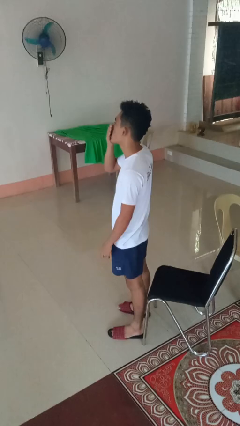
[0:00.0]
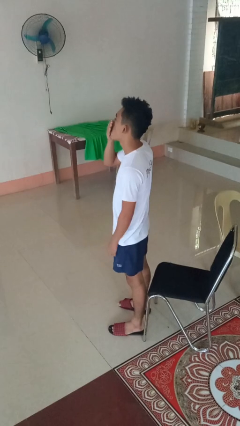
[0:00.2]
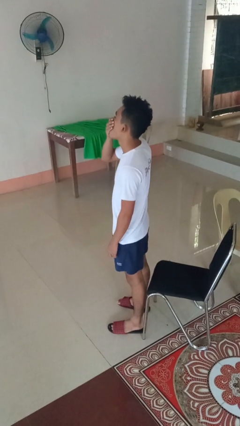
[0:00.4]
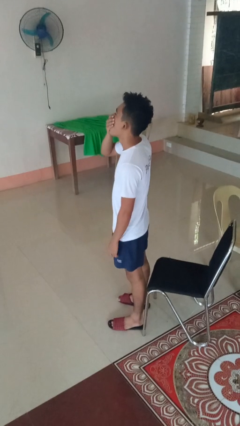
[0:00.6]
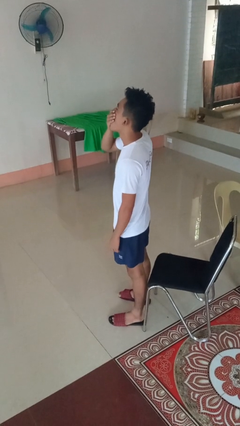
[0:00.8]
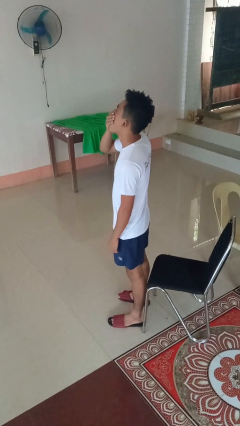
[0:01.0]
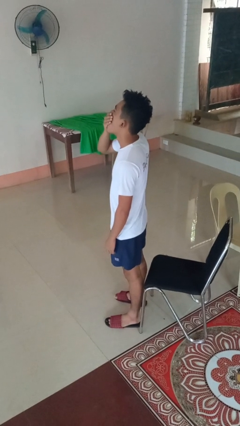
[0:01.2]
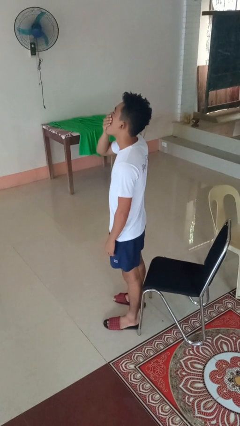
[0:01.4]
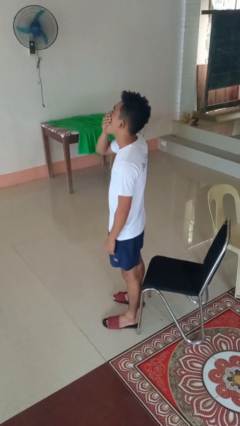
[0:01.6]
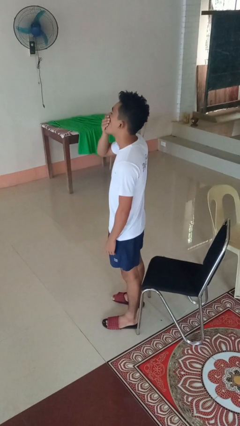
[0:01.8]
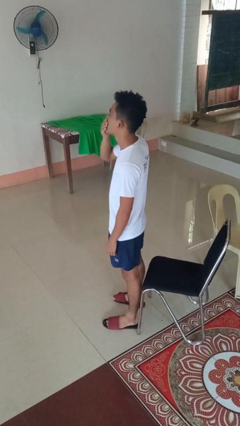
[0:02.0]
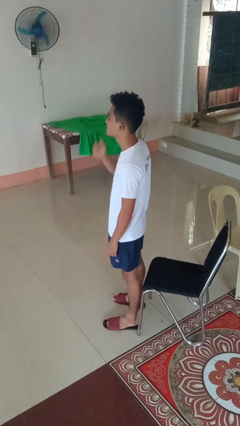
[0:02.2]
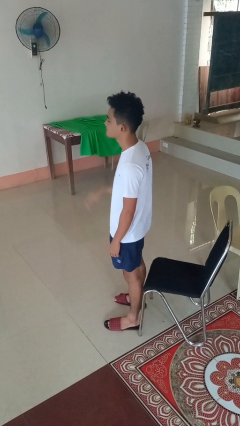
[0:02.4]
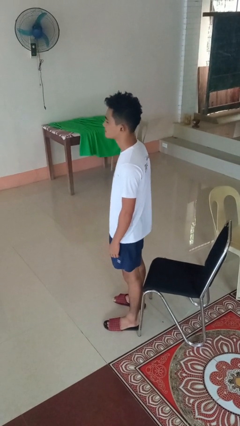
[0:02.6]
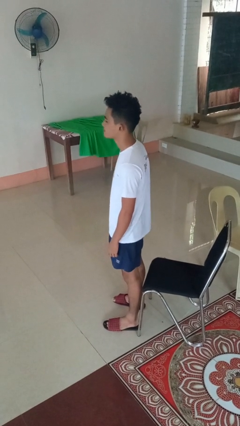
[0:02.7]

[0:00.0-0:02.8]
person yawns

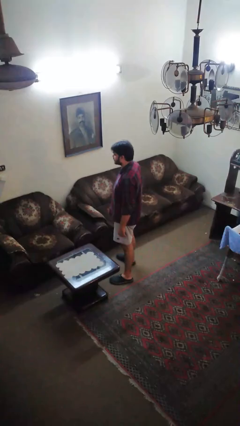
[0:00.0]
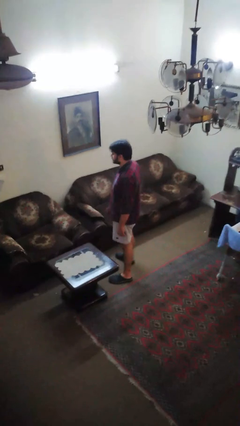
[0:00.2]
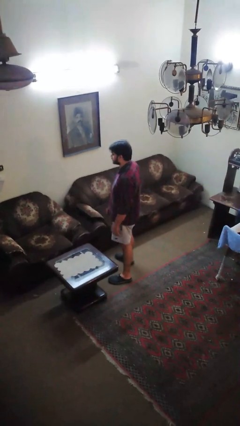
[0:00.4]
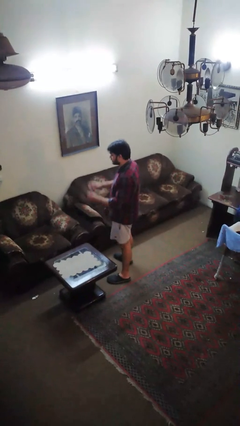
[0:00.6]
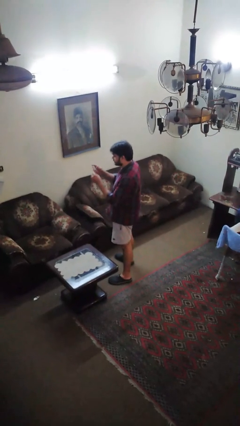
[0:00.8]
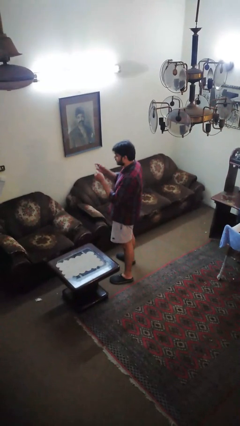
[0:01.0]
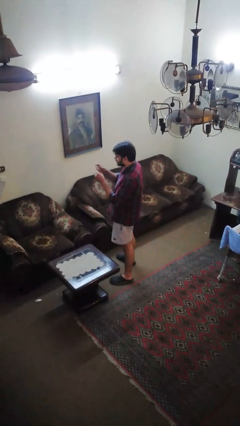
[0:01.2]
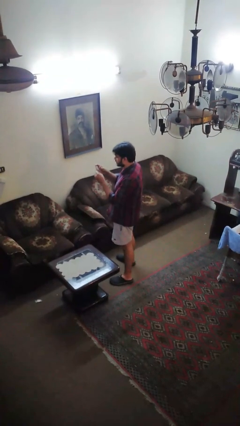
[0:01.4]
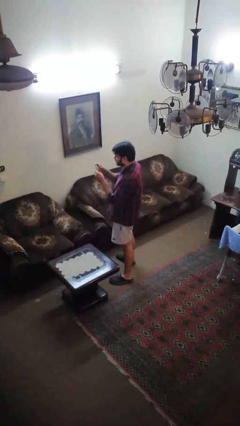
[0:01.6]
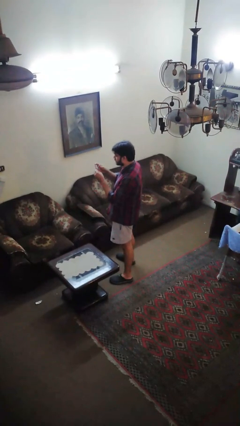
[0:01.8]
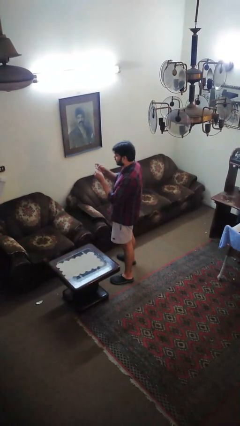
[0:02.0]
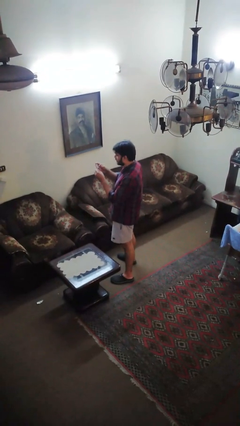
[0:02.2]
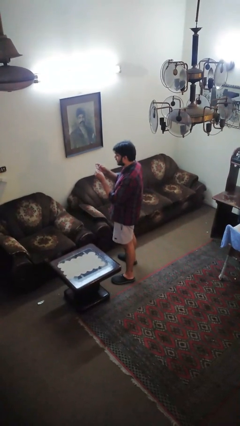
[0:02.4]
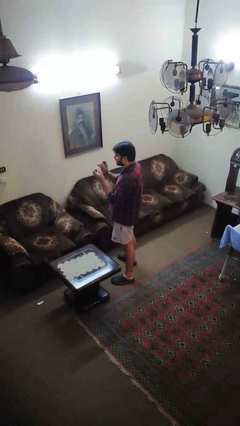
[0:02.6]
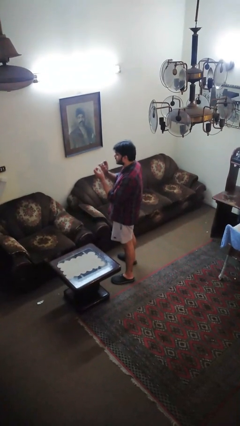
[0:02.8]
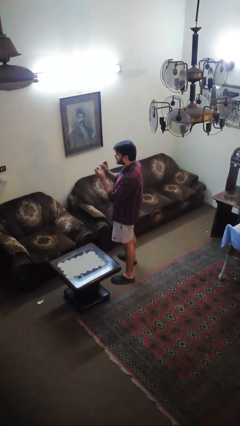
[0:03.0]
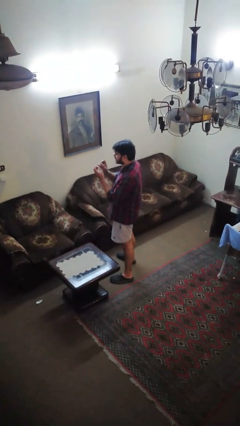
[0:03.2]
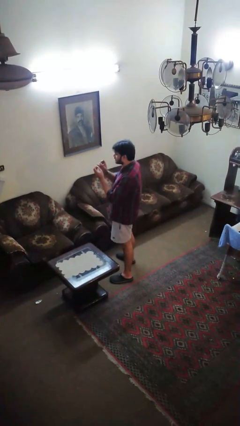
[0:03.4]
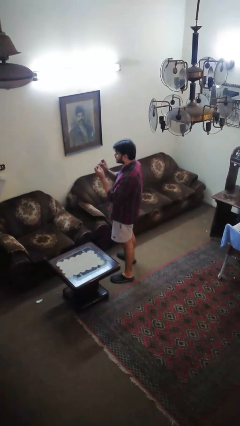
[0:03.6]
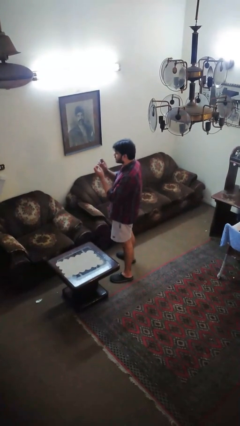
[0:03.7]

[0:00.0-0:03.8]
person clips fingernails

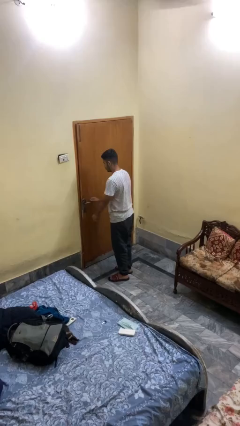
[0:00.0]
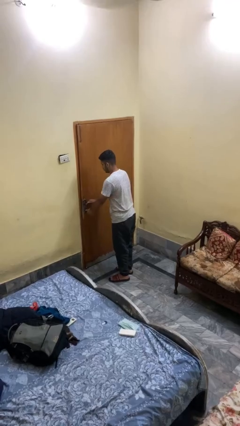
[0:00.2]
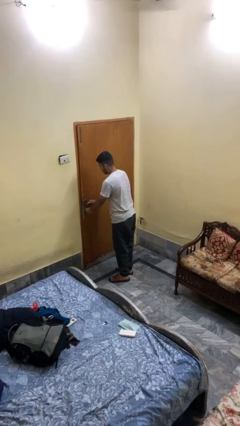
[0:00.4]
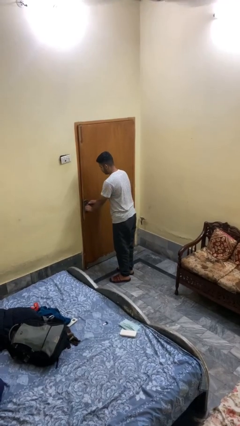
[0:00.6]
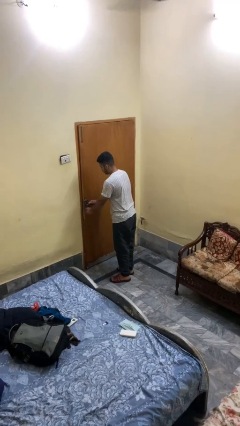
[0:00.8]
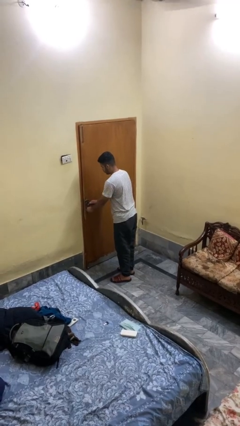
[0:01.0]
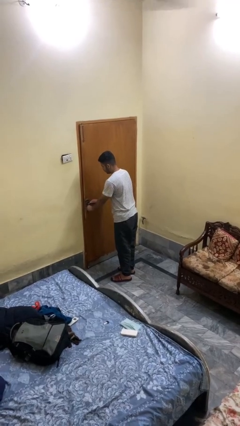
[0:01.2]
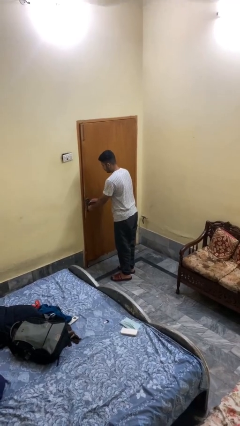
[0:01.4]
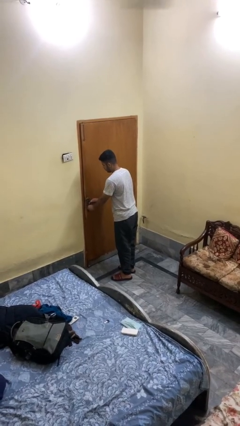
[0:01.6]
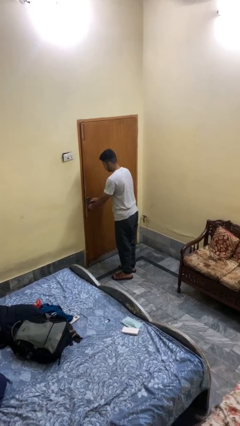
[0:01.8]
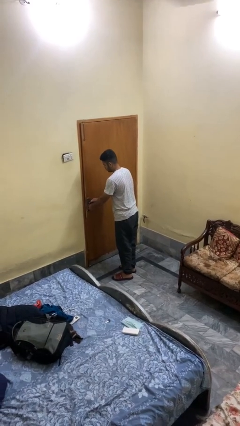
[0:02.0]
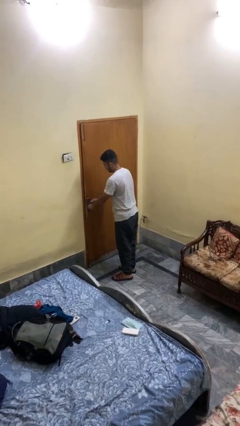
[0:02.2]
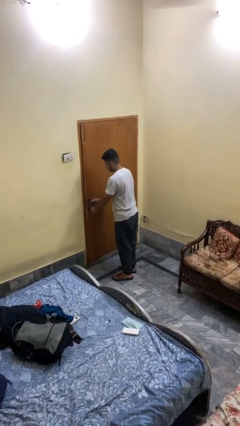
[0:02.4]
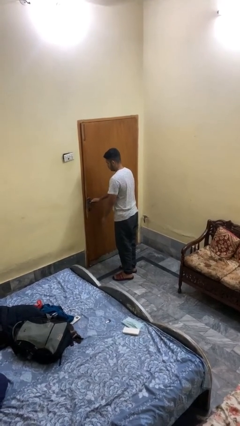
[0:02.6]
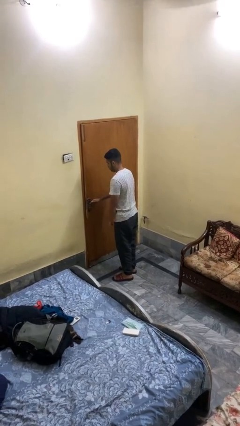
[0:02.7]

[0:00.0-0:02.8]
person unlocks door with keys

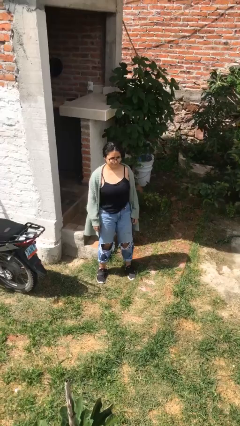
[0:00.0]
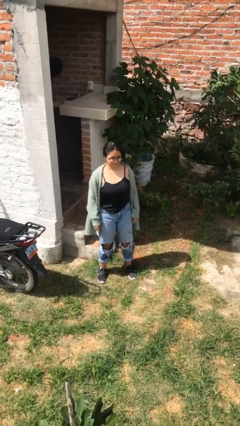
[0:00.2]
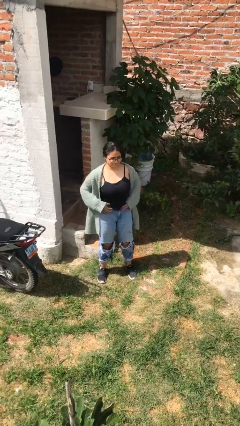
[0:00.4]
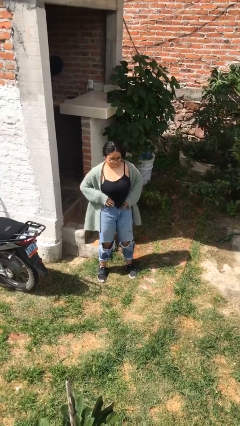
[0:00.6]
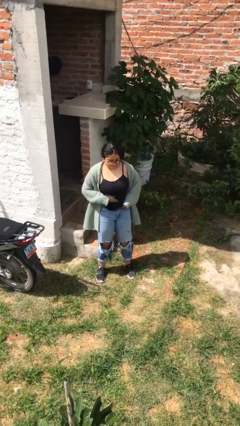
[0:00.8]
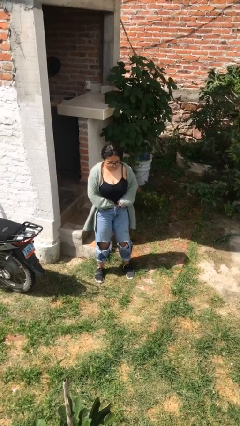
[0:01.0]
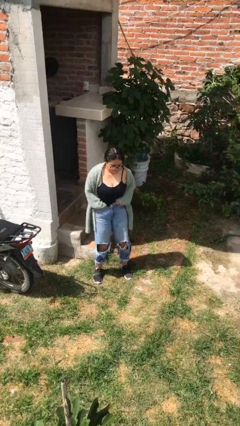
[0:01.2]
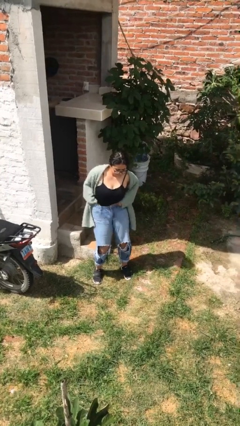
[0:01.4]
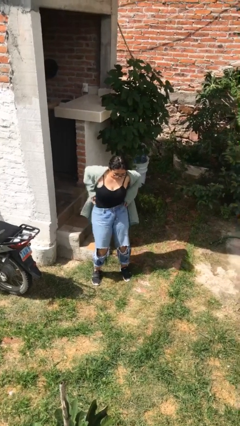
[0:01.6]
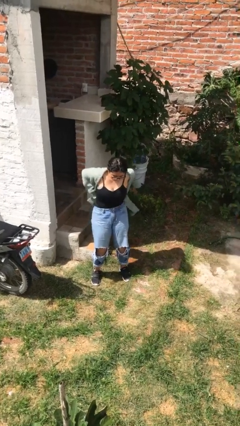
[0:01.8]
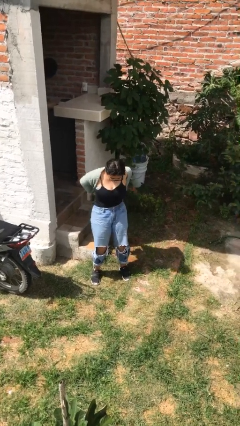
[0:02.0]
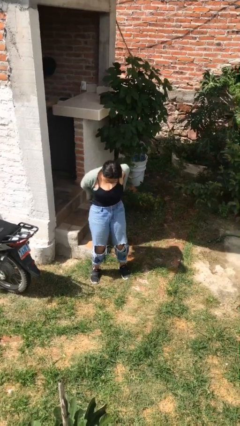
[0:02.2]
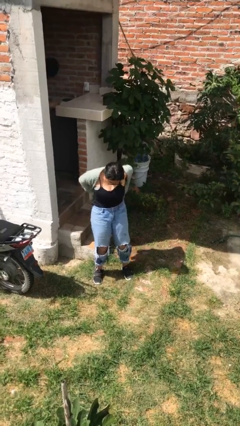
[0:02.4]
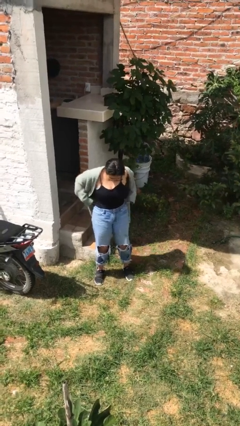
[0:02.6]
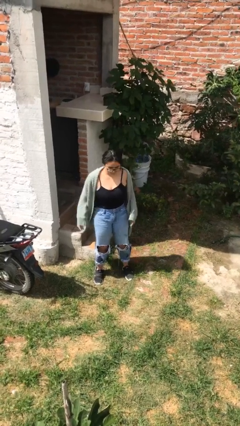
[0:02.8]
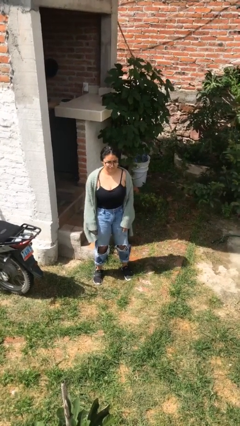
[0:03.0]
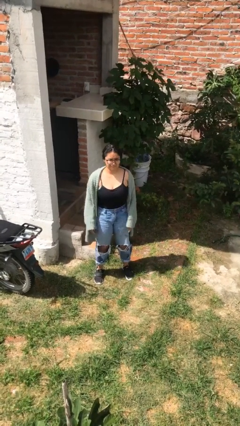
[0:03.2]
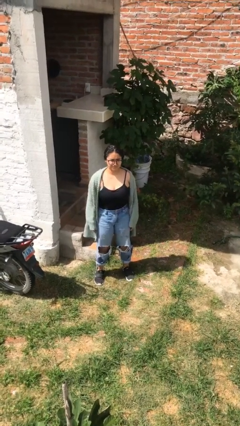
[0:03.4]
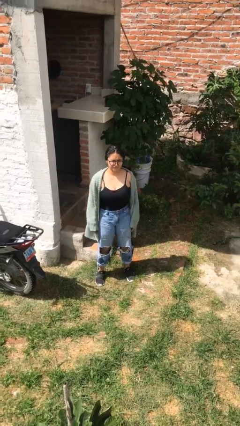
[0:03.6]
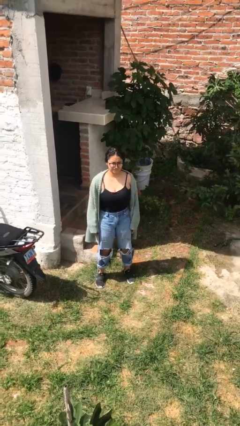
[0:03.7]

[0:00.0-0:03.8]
person tucks in shirt

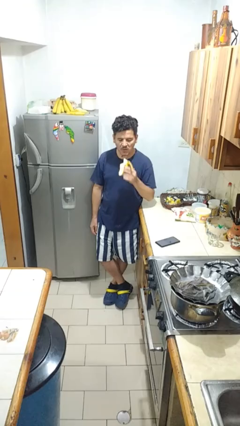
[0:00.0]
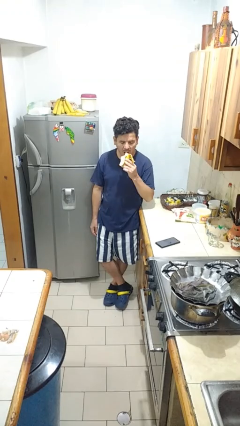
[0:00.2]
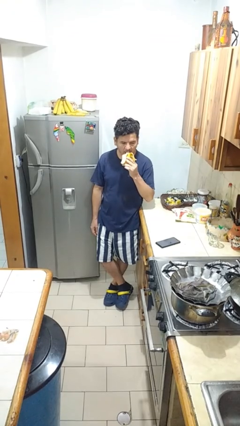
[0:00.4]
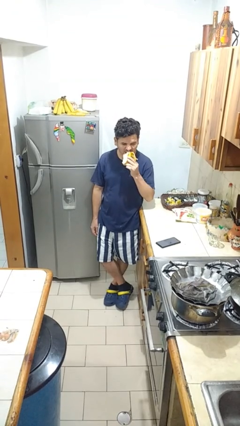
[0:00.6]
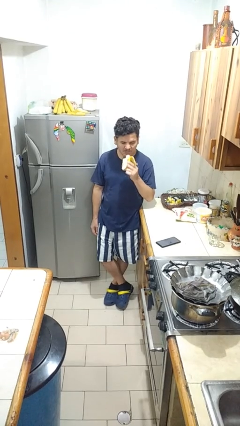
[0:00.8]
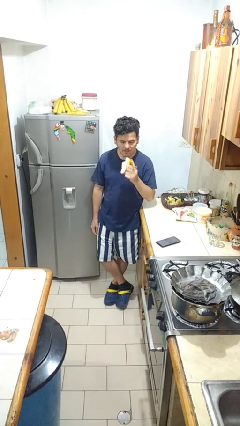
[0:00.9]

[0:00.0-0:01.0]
person eats banana

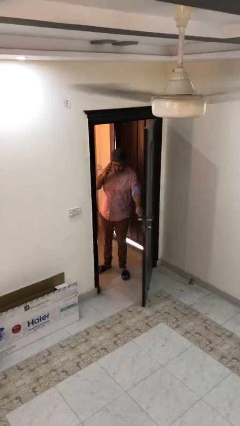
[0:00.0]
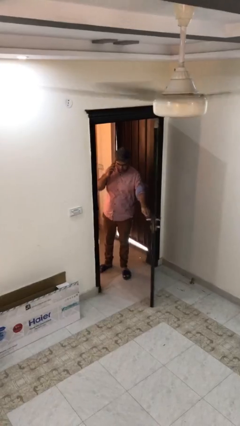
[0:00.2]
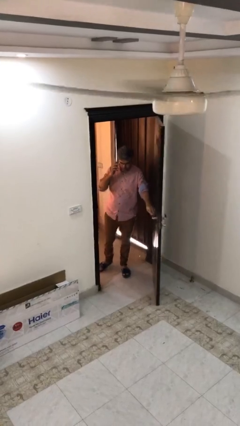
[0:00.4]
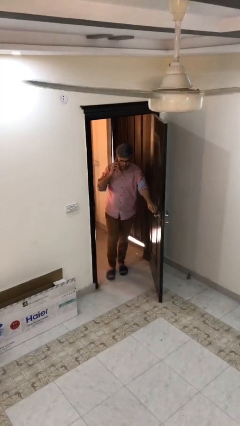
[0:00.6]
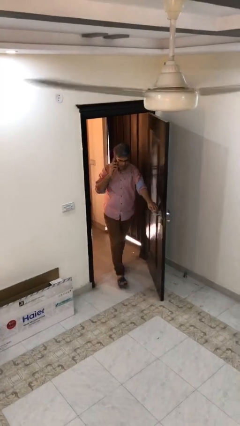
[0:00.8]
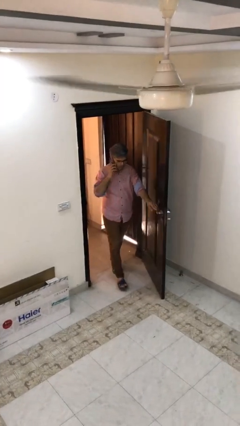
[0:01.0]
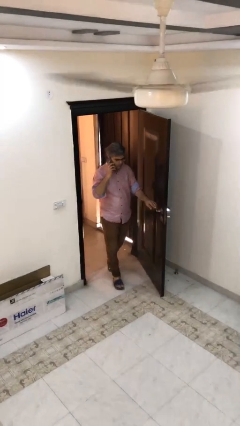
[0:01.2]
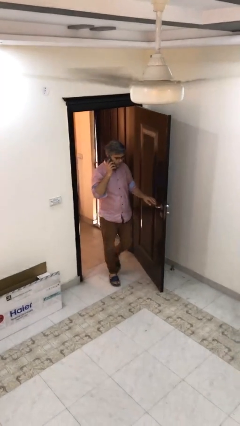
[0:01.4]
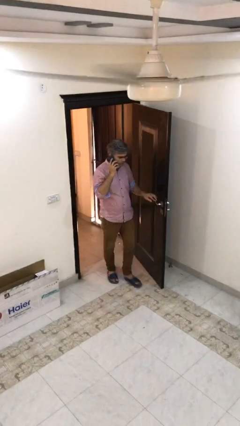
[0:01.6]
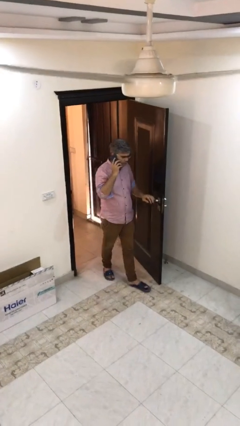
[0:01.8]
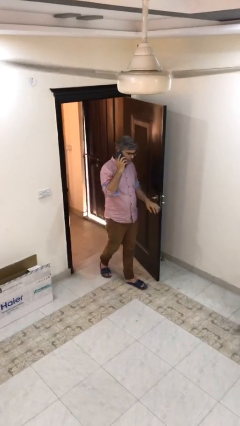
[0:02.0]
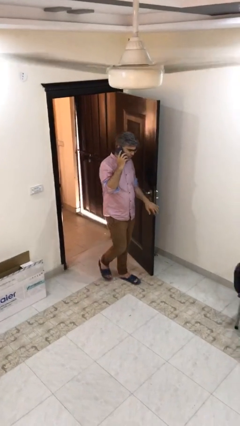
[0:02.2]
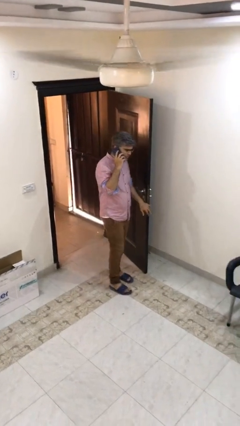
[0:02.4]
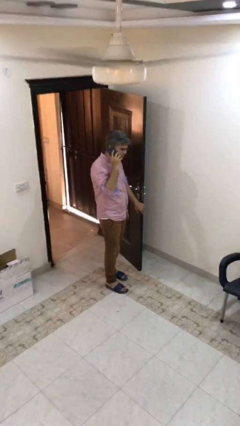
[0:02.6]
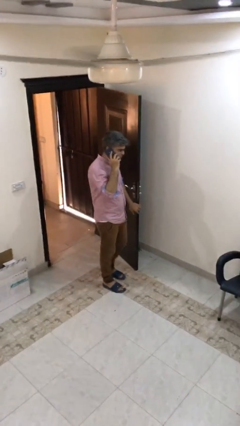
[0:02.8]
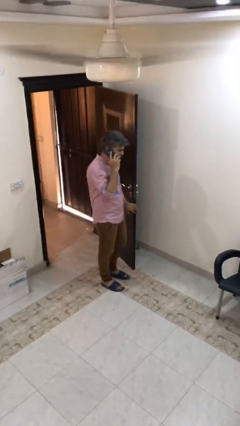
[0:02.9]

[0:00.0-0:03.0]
person enters scene through structure

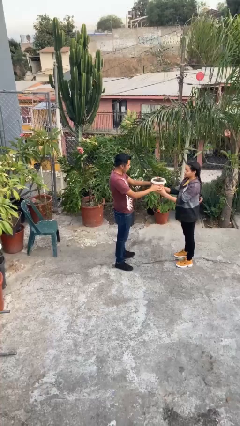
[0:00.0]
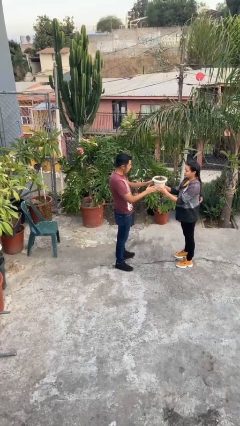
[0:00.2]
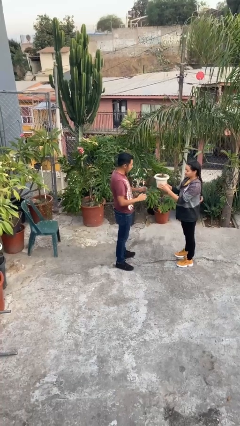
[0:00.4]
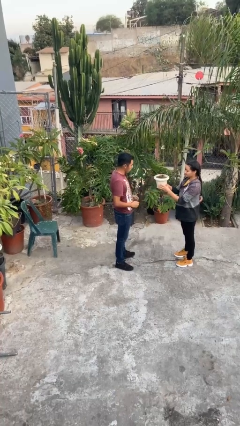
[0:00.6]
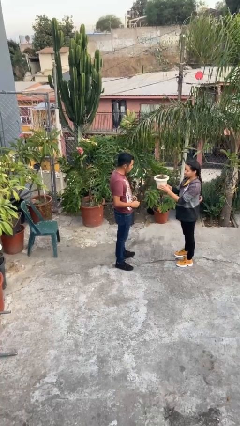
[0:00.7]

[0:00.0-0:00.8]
person transfers object to person
